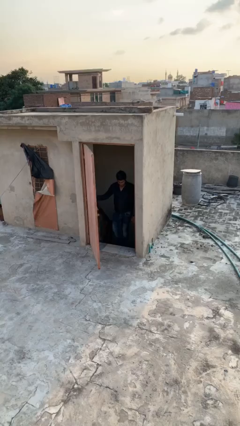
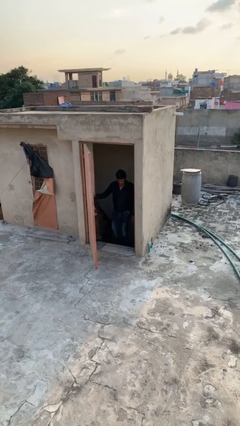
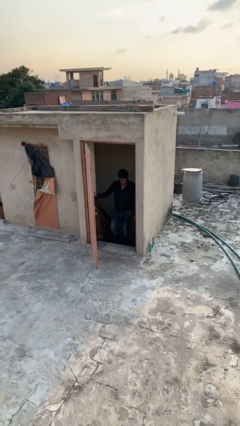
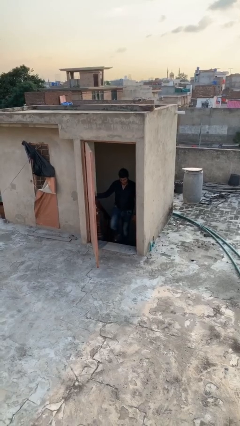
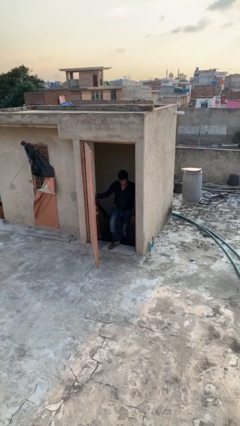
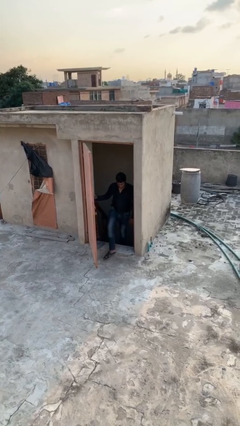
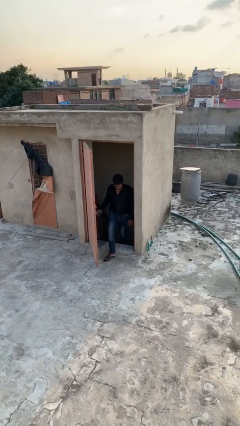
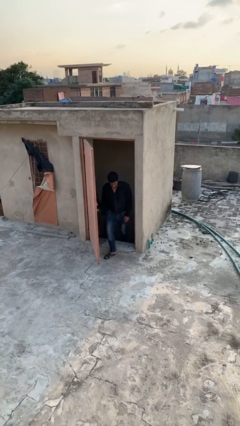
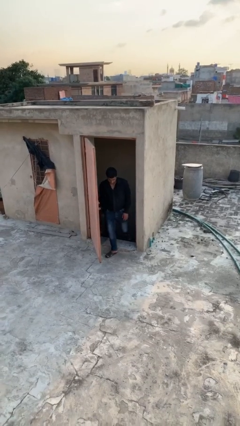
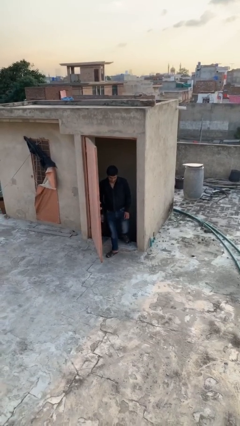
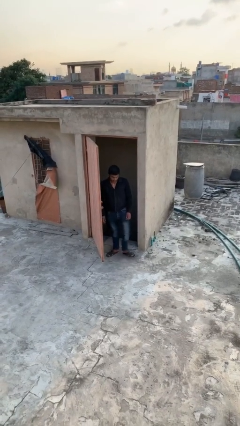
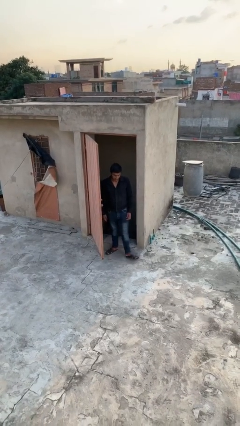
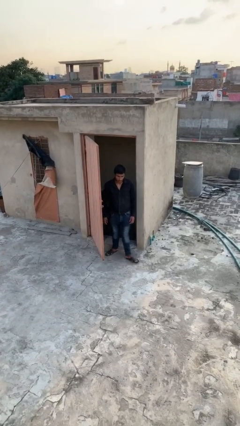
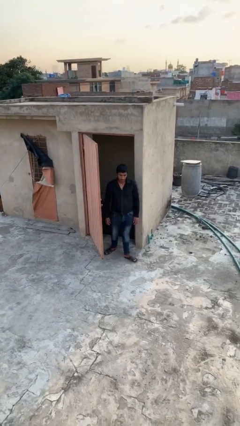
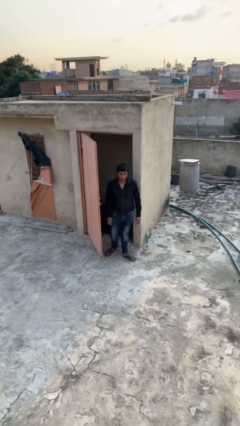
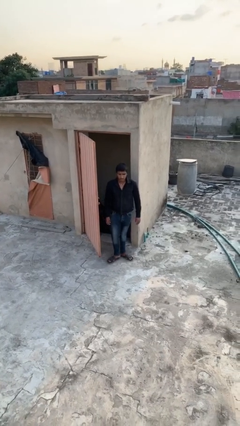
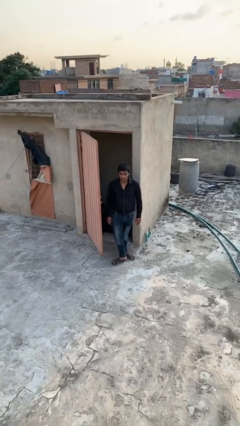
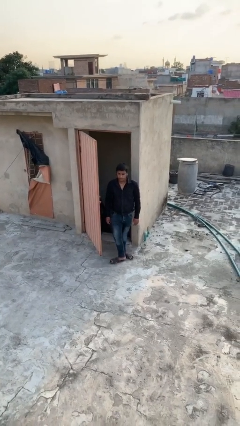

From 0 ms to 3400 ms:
person enters scene through structure

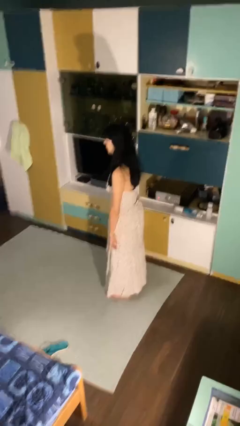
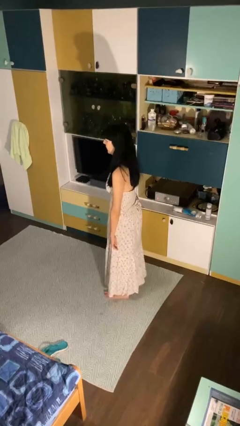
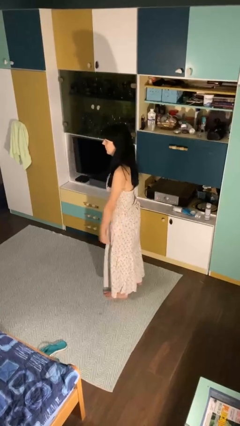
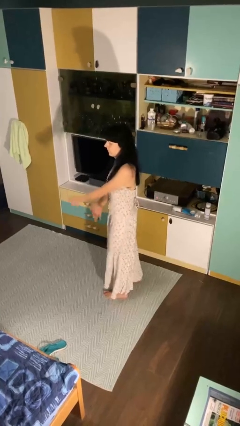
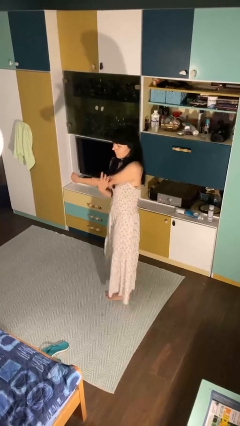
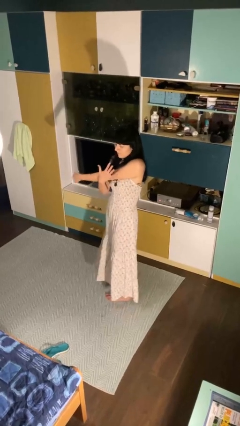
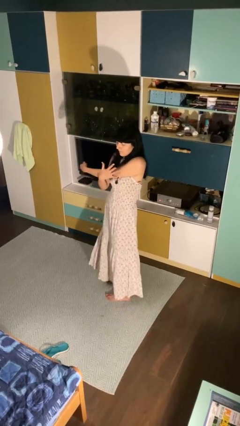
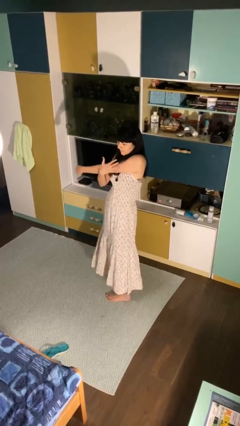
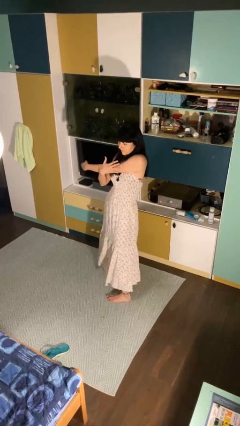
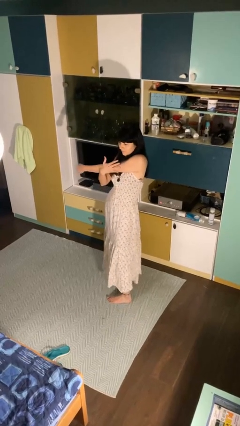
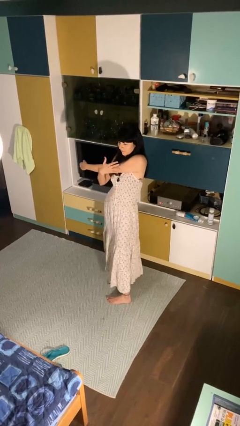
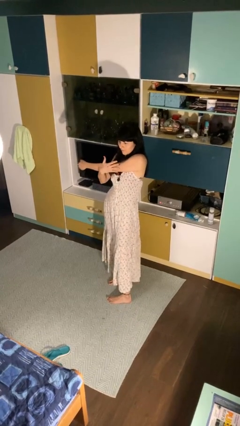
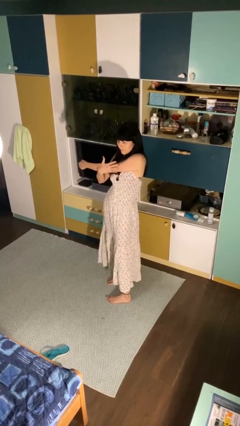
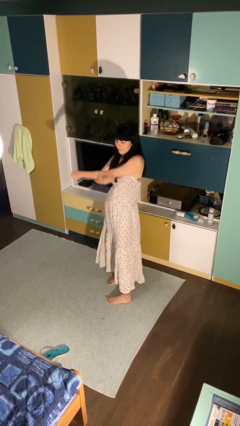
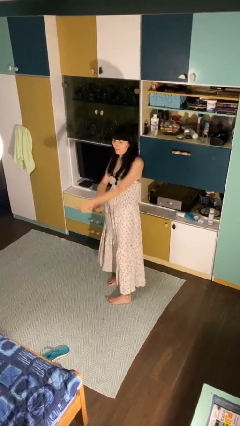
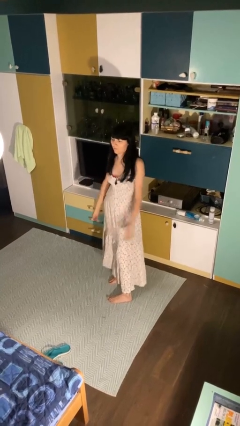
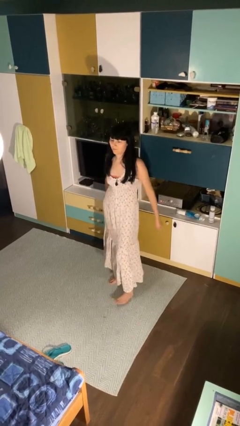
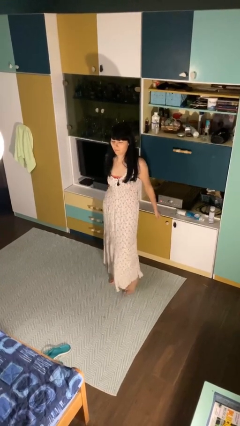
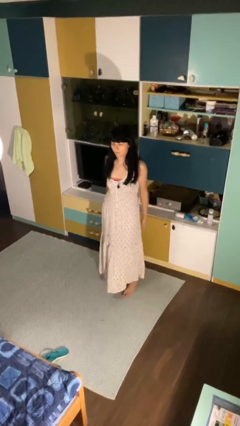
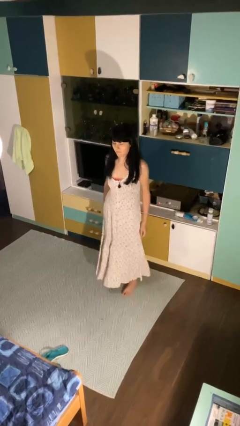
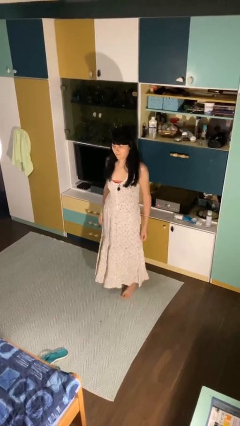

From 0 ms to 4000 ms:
person stretches arms to side

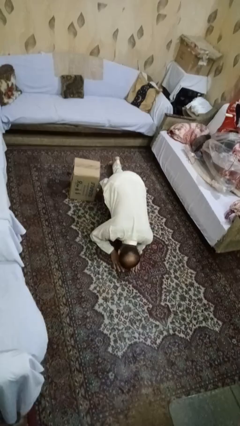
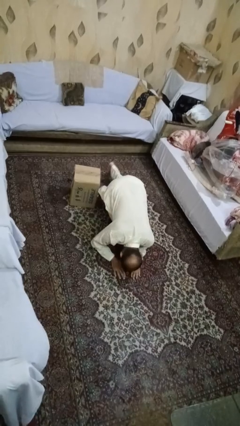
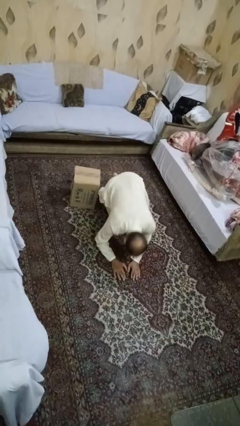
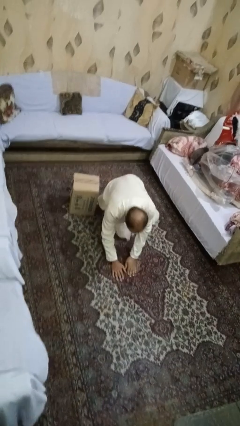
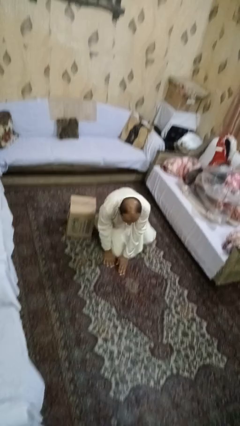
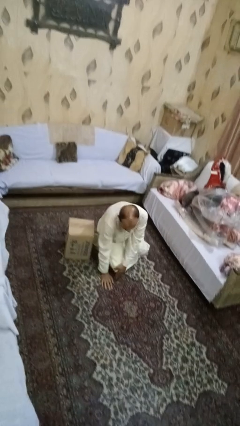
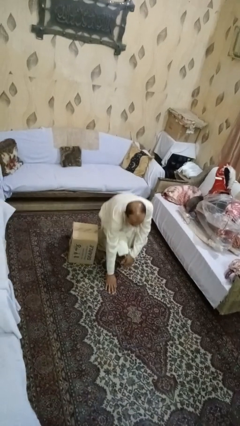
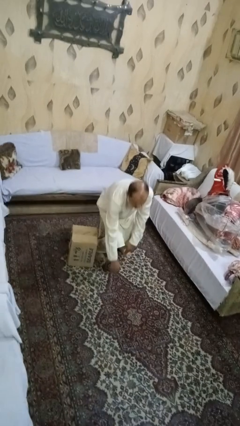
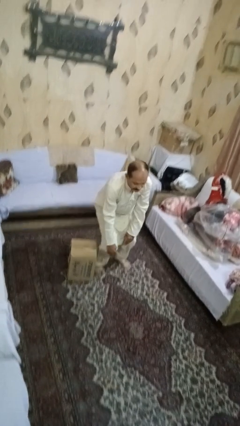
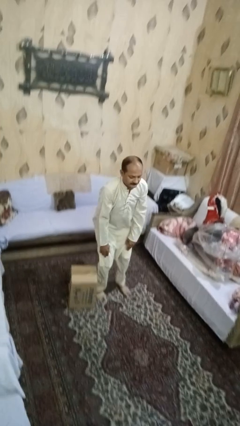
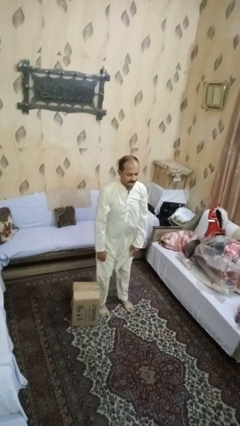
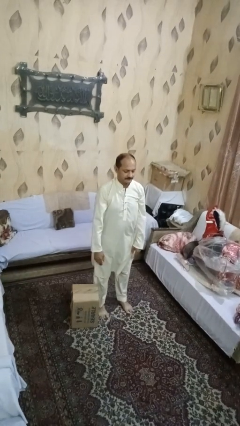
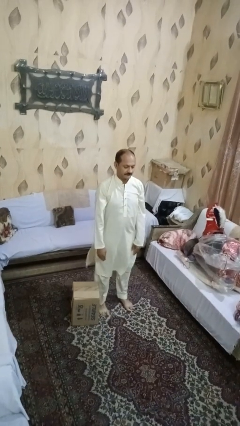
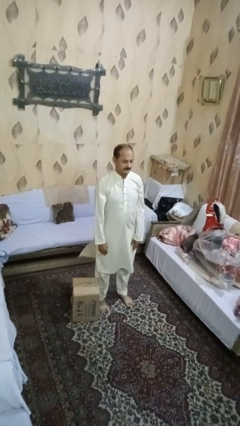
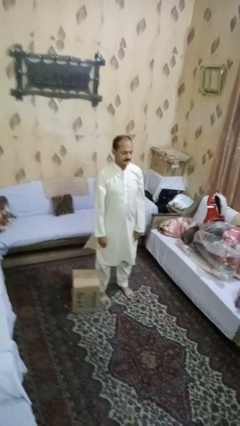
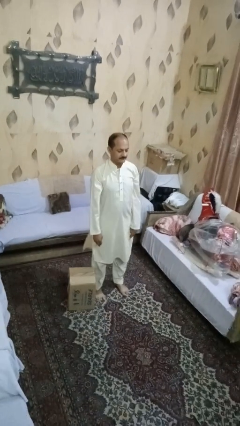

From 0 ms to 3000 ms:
person stands up from floor

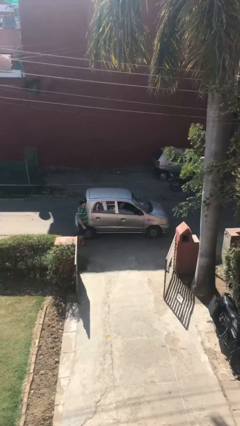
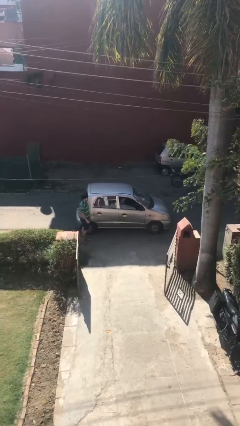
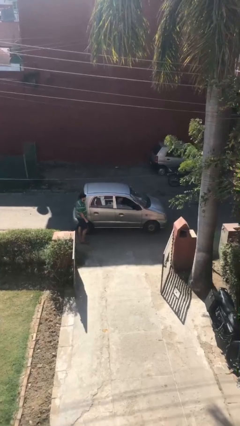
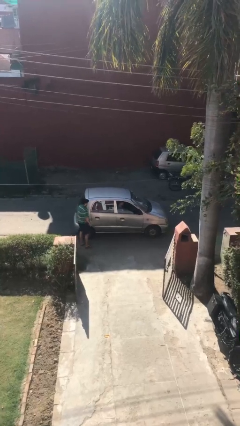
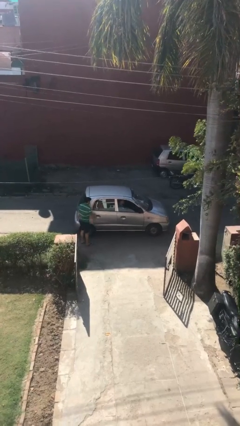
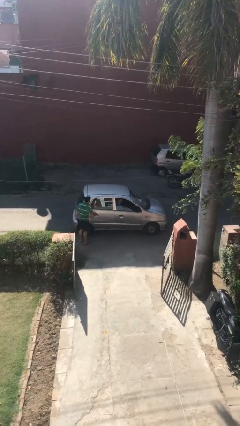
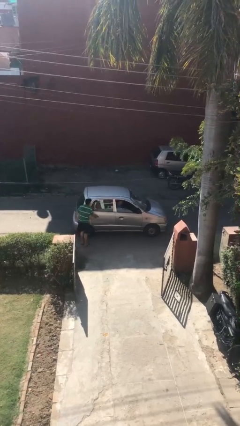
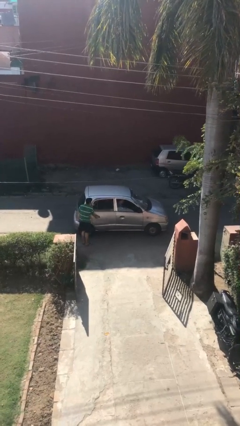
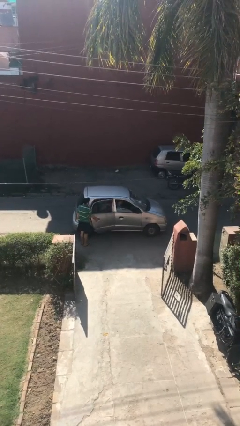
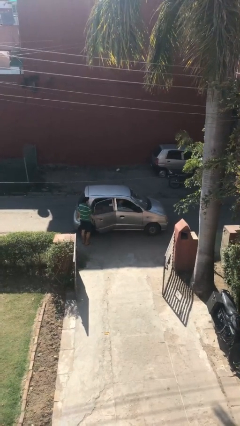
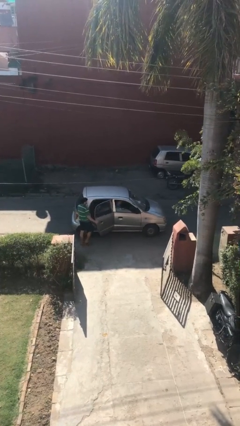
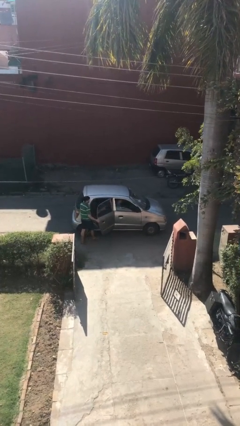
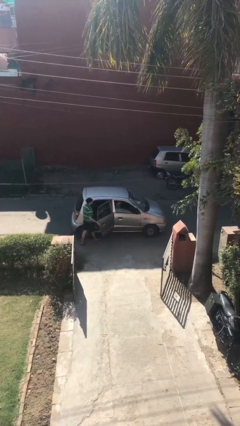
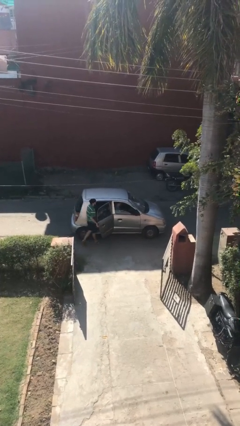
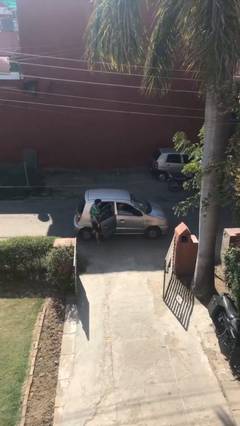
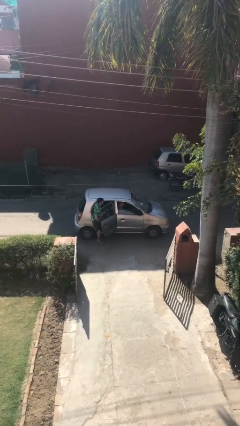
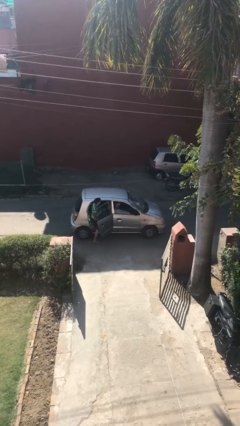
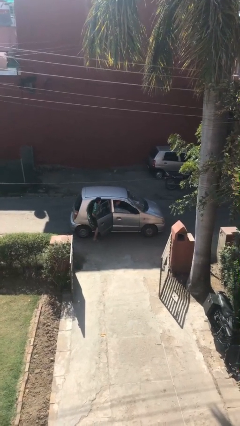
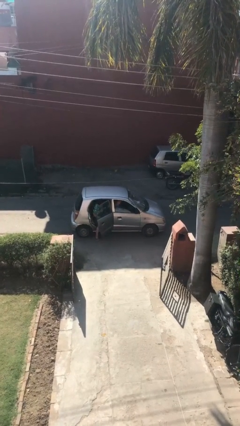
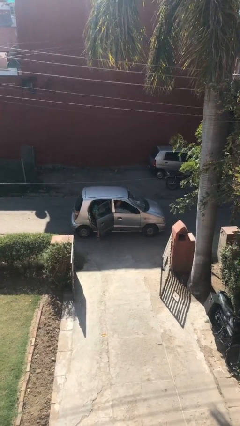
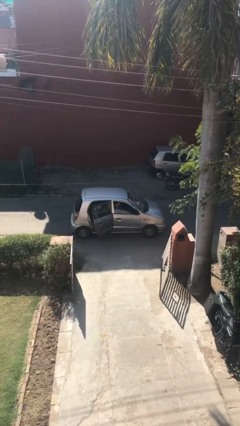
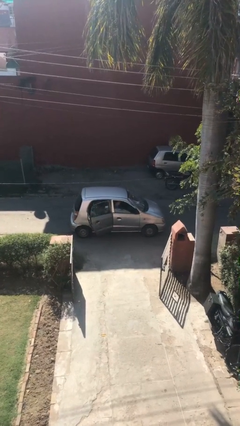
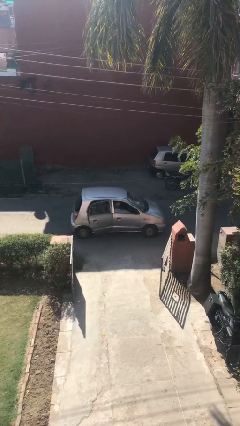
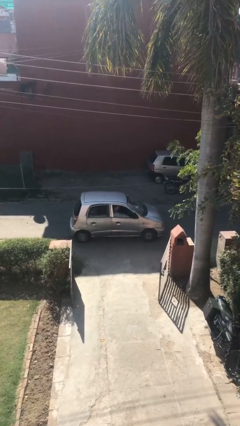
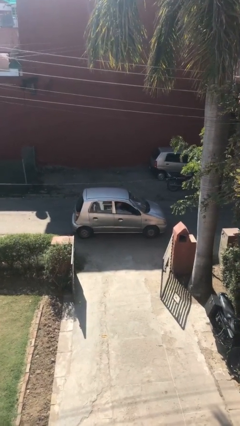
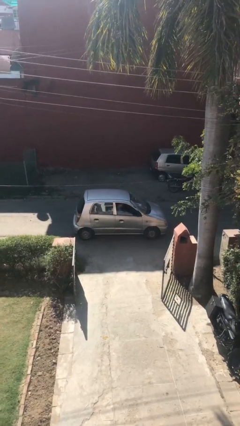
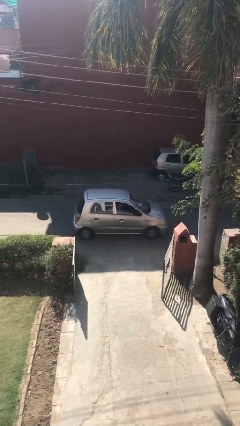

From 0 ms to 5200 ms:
car picks up person

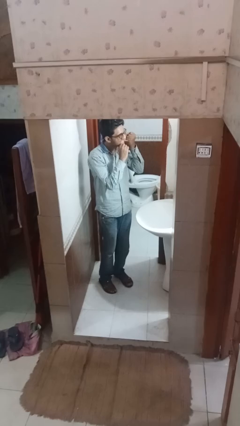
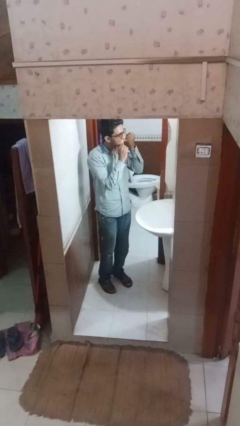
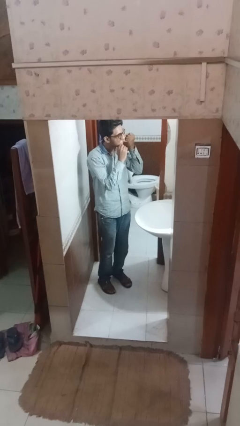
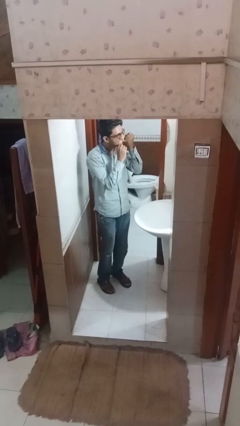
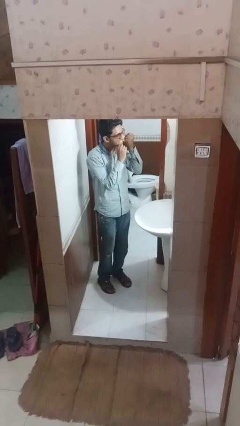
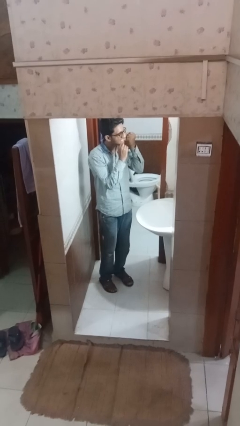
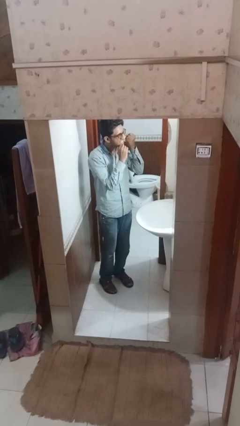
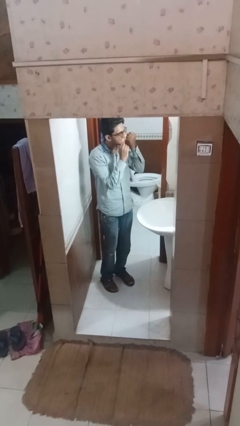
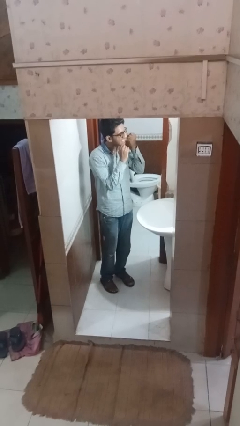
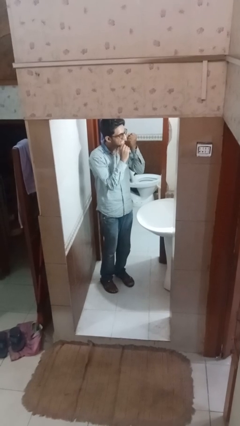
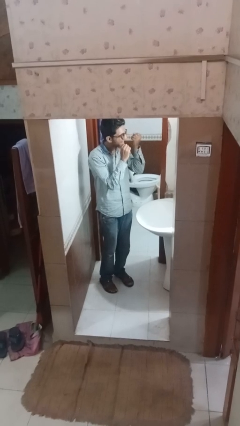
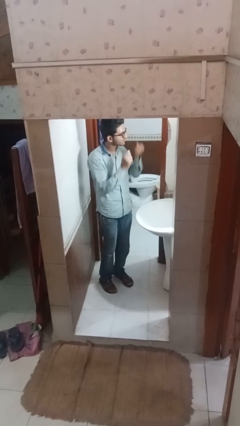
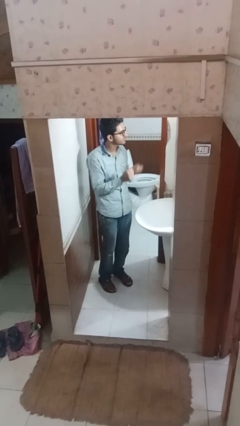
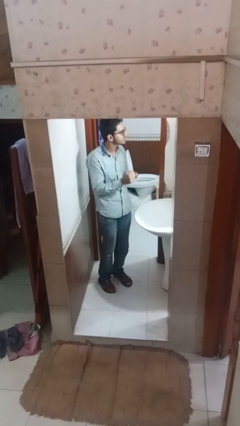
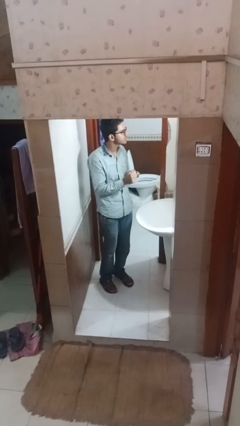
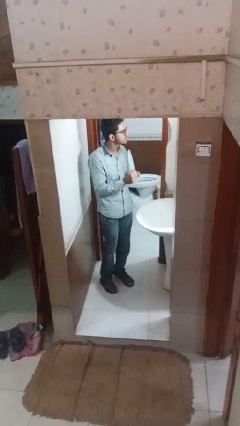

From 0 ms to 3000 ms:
person flosses
